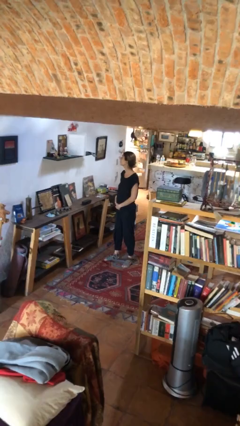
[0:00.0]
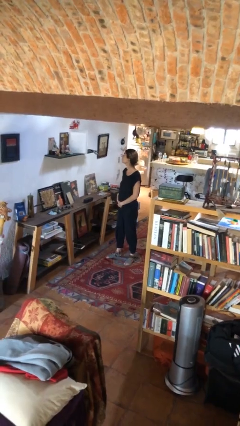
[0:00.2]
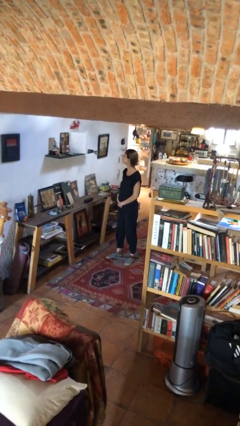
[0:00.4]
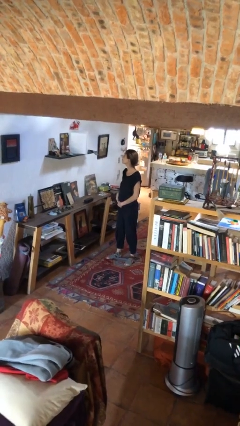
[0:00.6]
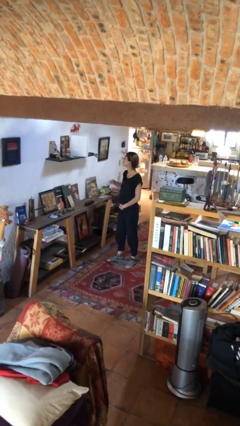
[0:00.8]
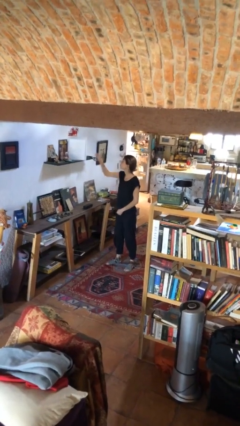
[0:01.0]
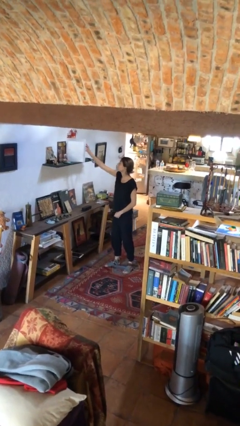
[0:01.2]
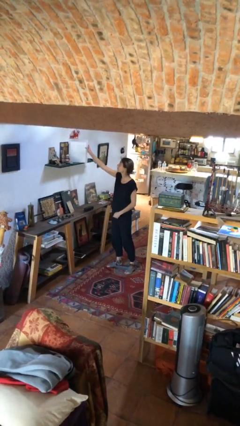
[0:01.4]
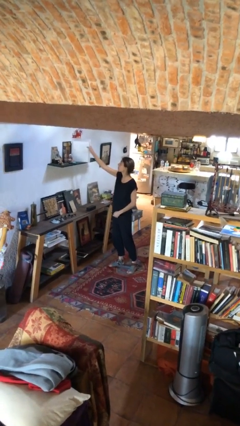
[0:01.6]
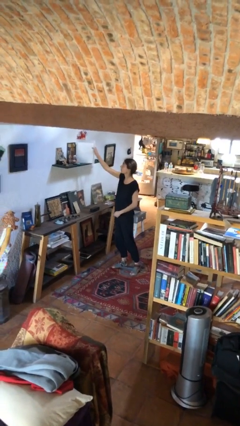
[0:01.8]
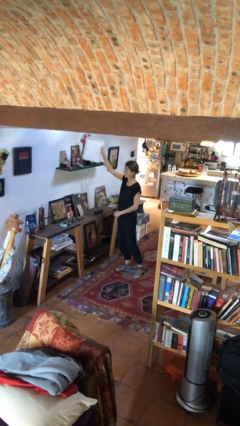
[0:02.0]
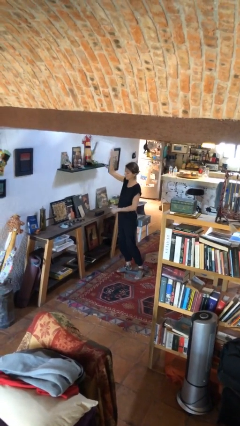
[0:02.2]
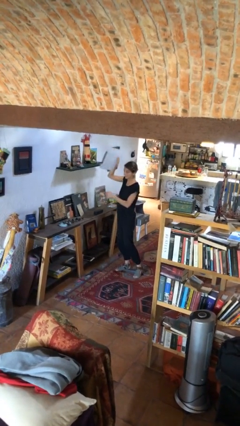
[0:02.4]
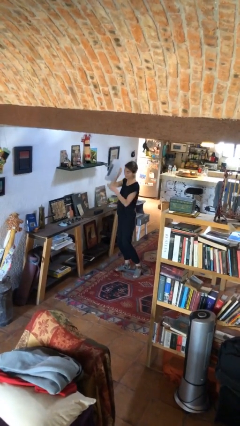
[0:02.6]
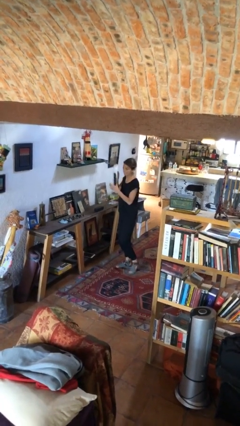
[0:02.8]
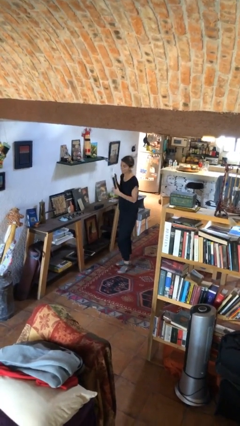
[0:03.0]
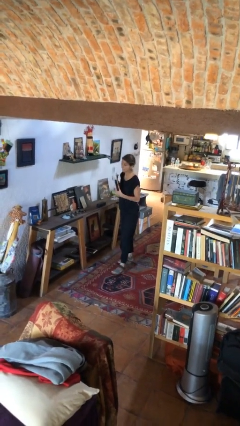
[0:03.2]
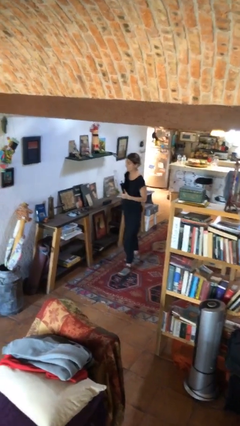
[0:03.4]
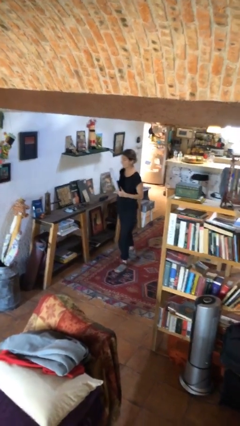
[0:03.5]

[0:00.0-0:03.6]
person picks up object from shelf

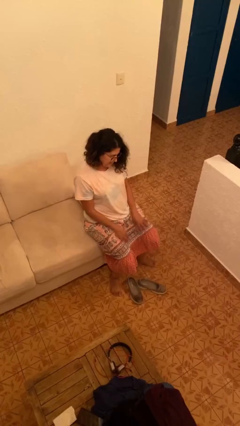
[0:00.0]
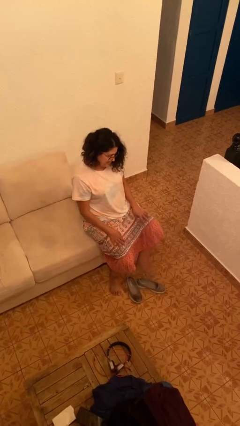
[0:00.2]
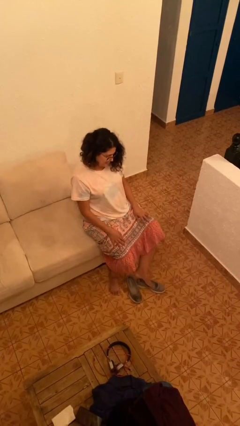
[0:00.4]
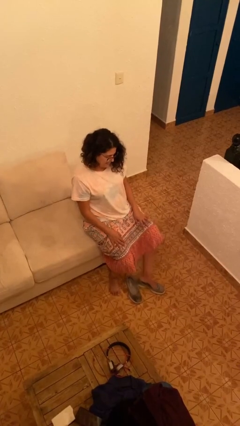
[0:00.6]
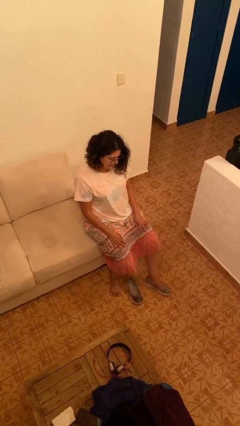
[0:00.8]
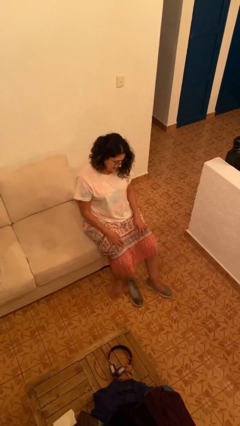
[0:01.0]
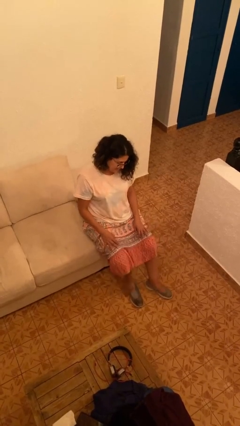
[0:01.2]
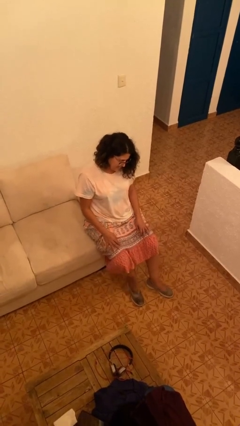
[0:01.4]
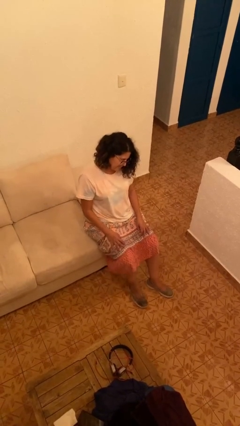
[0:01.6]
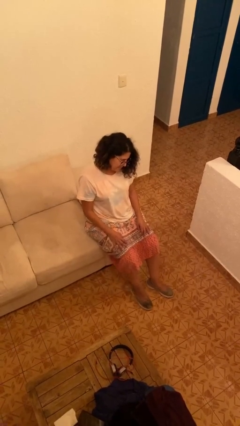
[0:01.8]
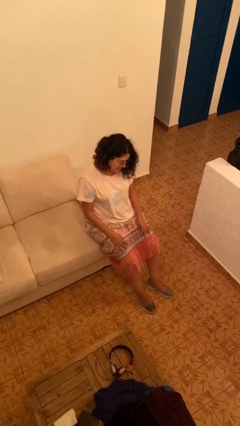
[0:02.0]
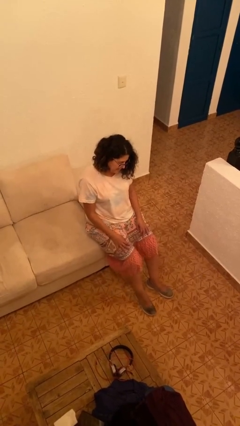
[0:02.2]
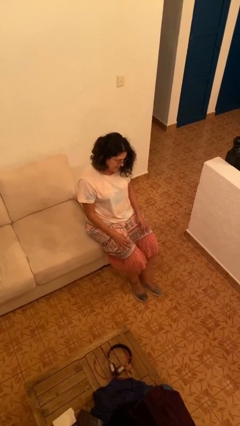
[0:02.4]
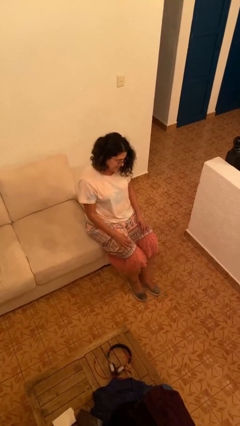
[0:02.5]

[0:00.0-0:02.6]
person puts on shoes

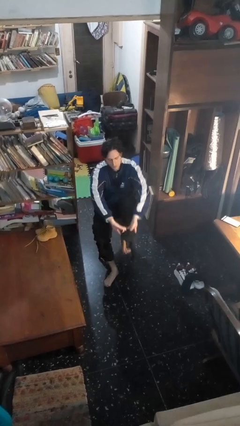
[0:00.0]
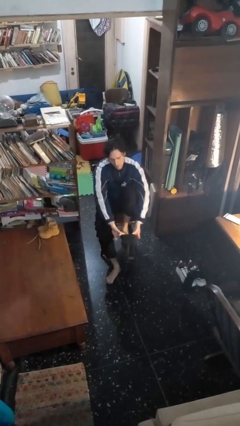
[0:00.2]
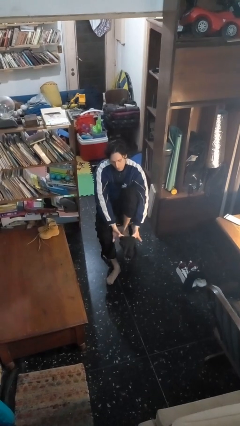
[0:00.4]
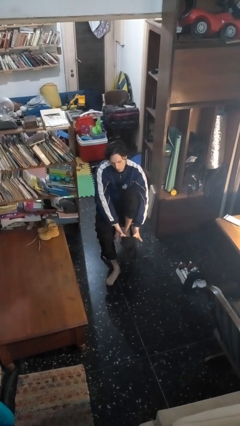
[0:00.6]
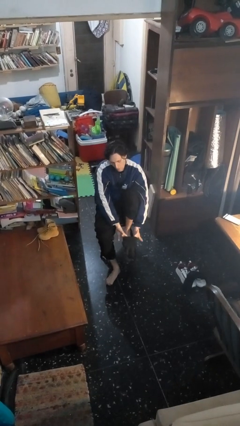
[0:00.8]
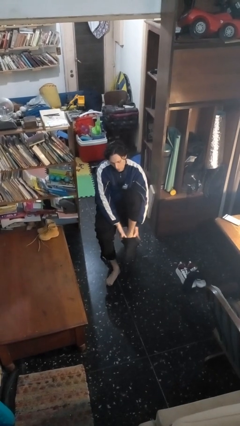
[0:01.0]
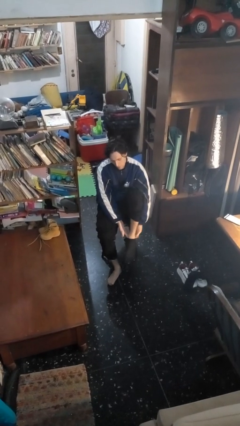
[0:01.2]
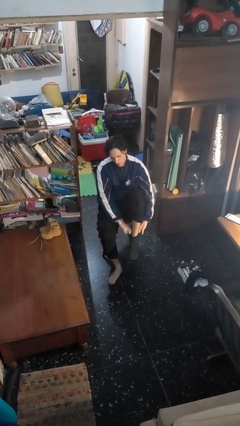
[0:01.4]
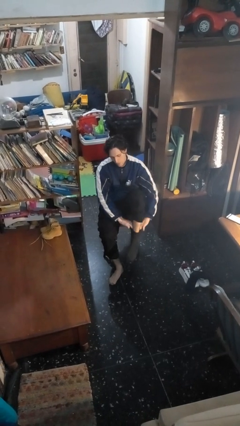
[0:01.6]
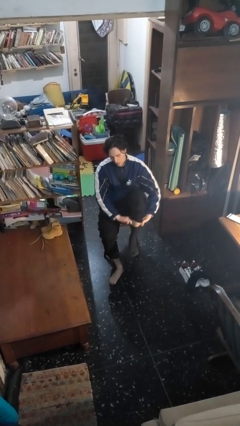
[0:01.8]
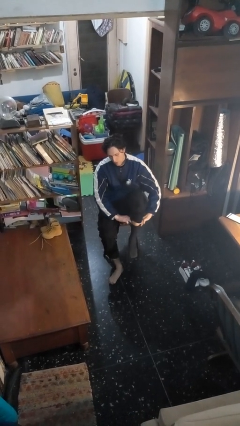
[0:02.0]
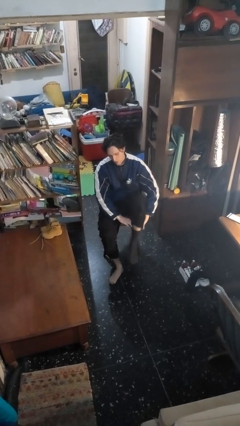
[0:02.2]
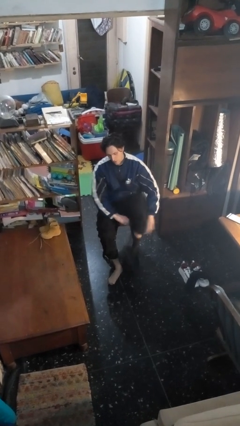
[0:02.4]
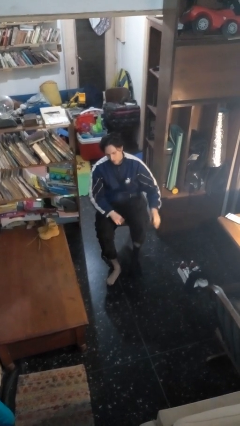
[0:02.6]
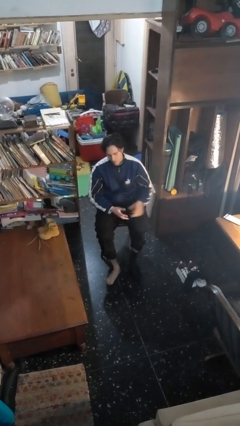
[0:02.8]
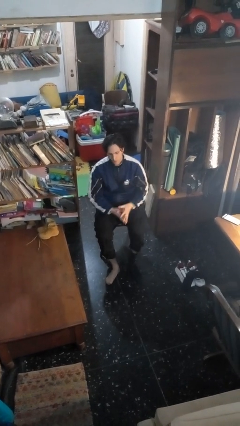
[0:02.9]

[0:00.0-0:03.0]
person puts on socks

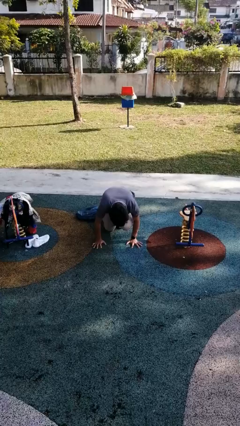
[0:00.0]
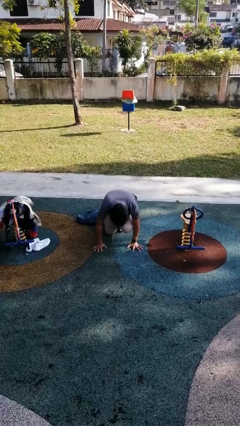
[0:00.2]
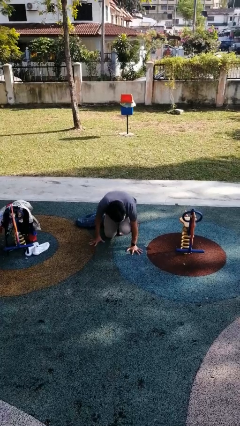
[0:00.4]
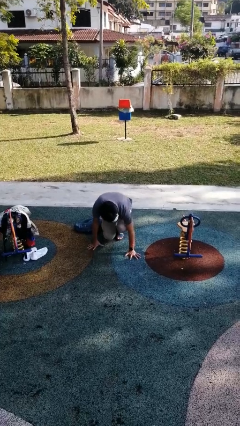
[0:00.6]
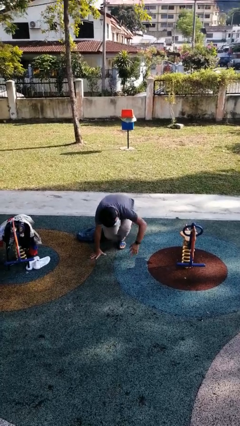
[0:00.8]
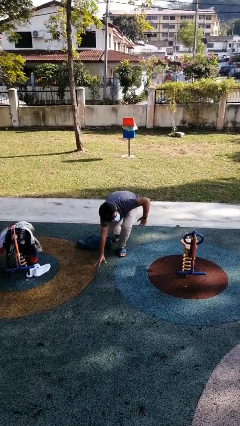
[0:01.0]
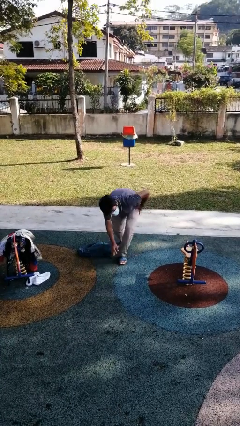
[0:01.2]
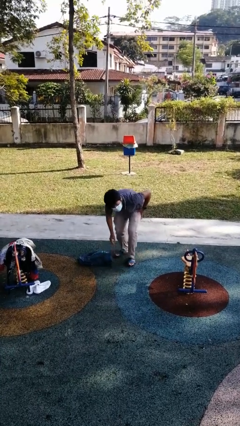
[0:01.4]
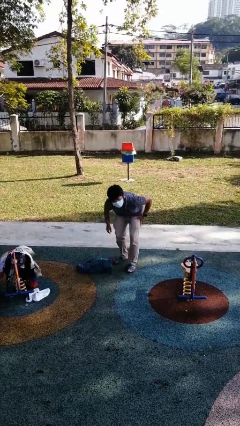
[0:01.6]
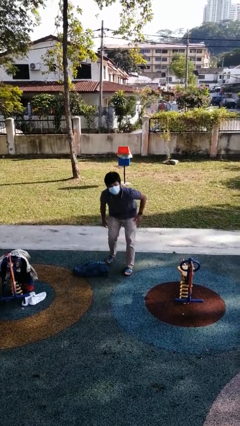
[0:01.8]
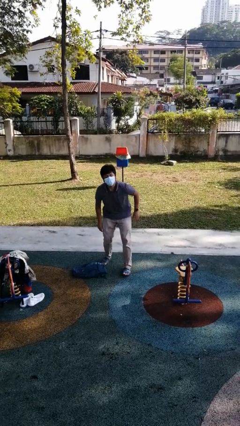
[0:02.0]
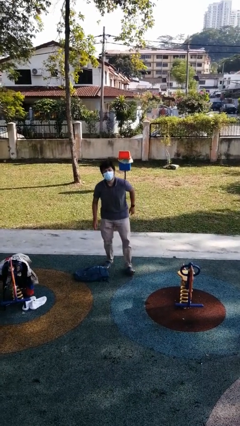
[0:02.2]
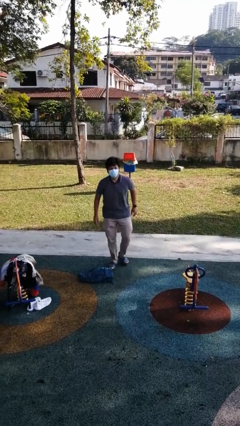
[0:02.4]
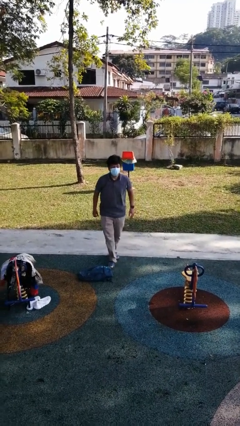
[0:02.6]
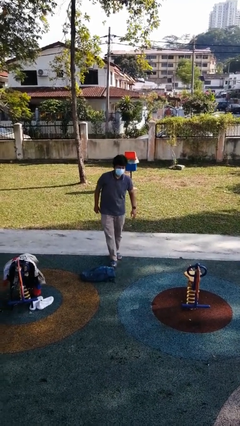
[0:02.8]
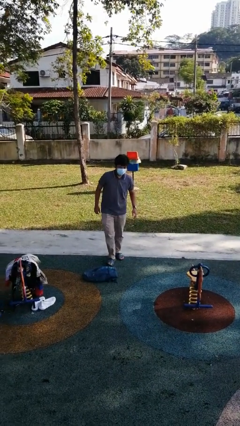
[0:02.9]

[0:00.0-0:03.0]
person stands up from floor

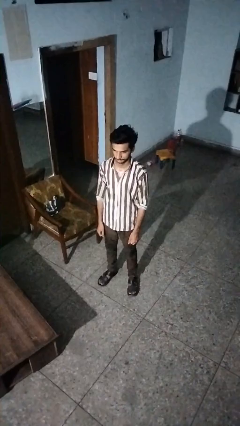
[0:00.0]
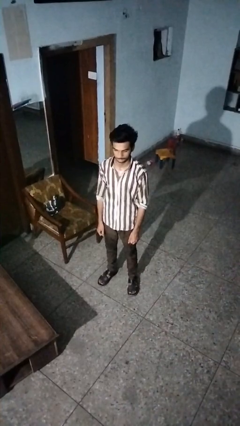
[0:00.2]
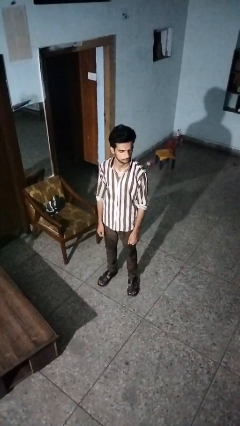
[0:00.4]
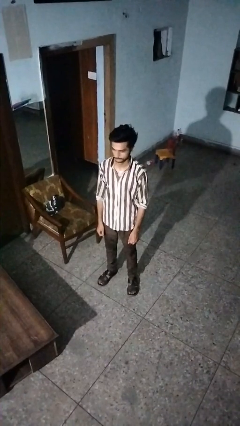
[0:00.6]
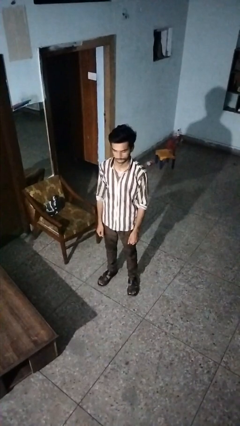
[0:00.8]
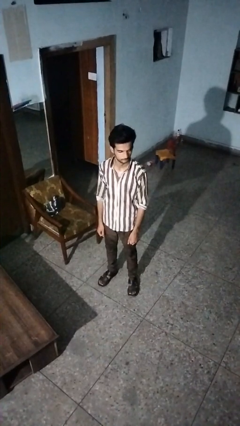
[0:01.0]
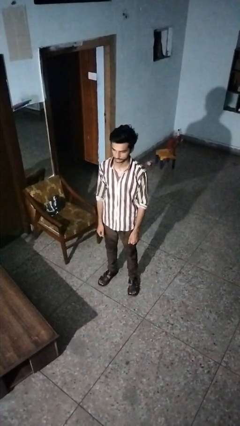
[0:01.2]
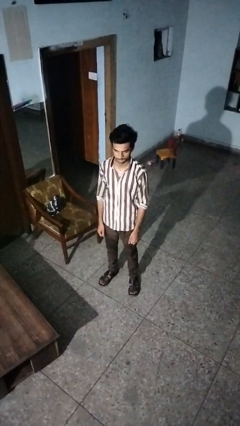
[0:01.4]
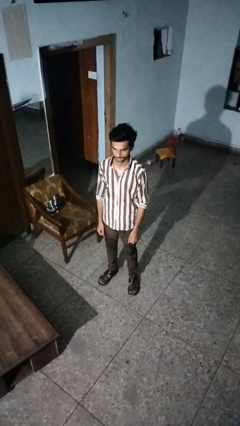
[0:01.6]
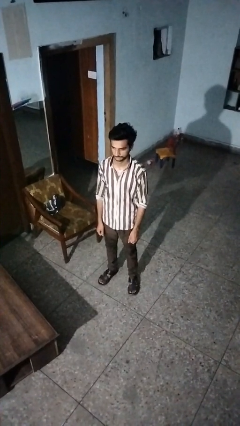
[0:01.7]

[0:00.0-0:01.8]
person shakes head

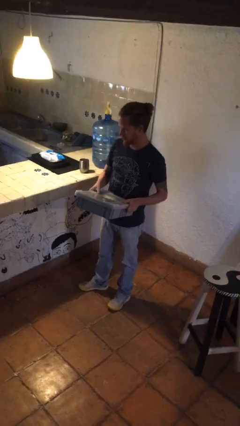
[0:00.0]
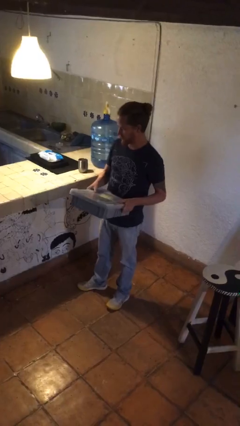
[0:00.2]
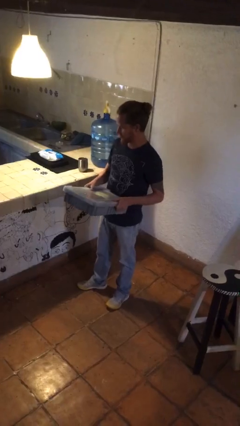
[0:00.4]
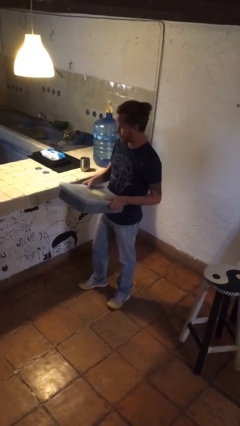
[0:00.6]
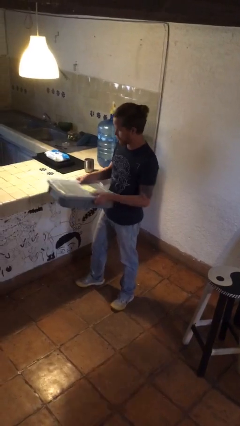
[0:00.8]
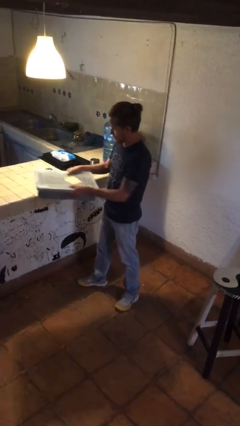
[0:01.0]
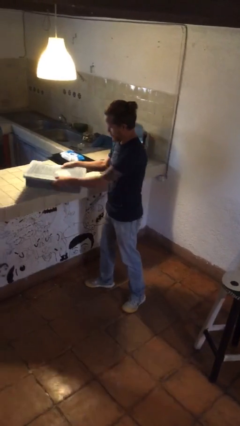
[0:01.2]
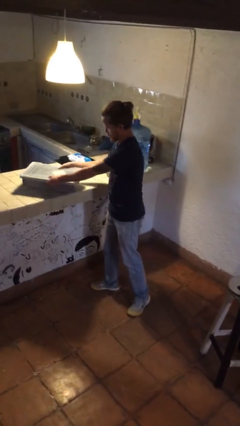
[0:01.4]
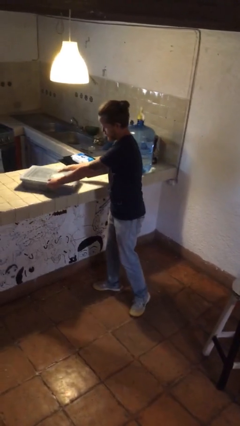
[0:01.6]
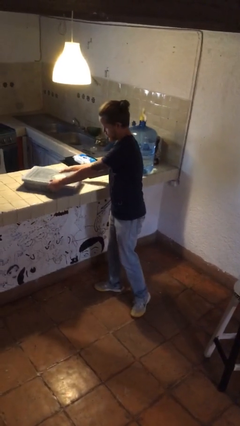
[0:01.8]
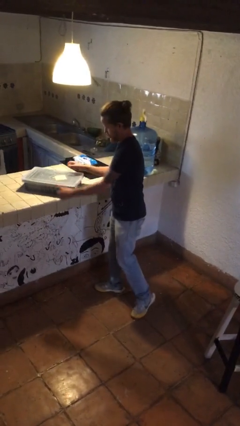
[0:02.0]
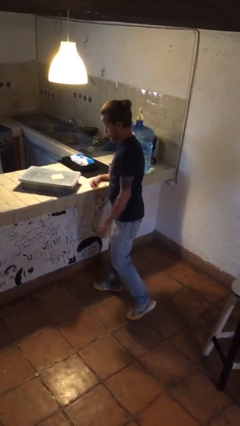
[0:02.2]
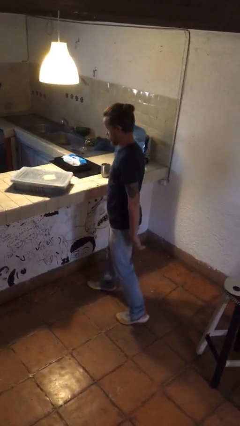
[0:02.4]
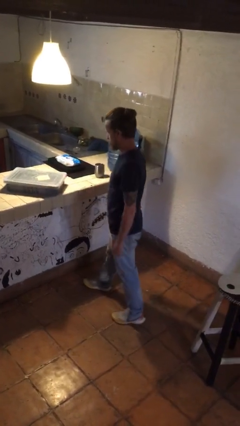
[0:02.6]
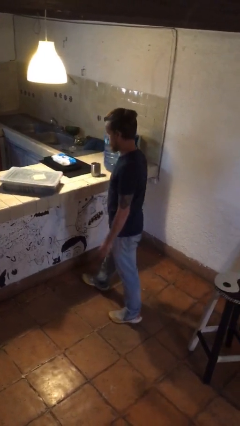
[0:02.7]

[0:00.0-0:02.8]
person puts down object on countertop

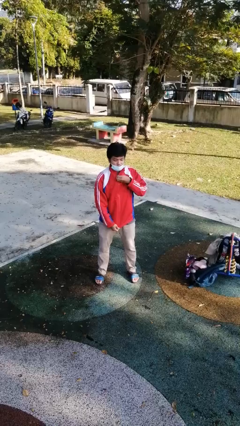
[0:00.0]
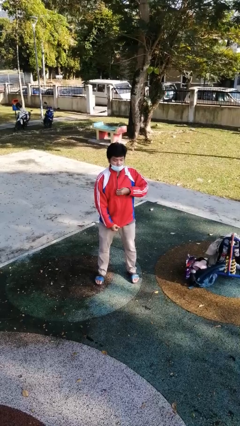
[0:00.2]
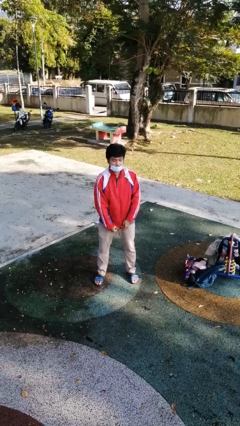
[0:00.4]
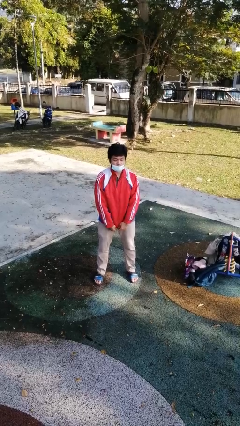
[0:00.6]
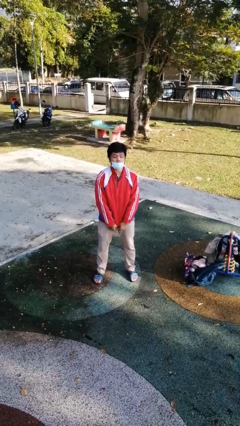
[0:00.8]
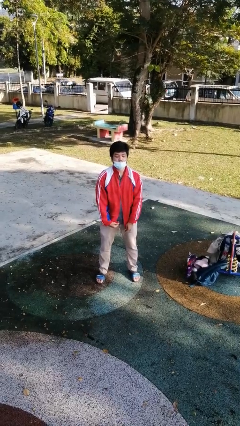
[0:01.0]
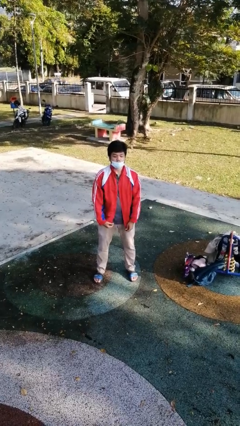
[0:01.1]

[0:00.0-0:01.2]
person unzips jacket
